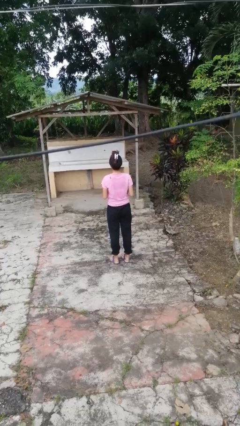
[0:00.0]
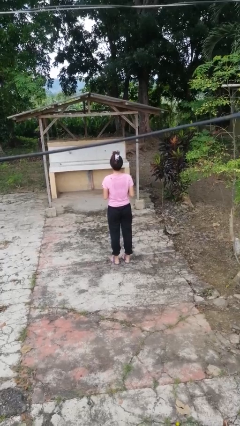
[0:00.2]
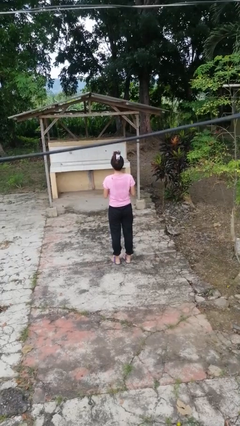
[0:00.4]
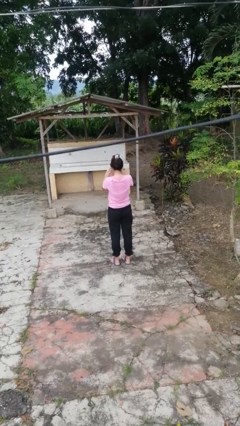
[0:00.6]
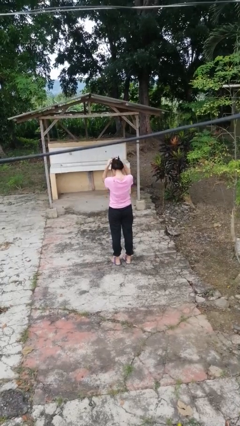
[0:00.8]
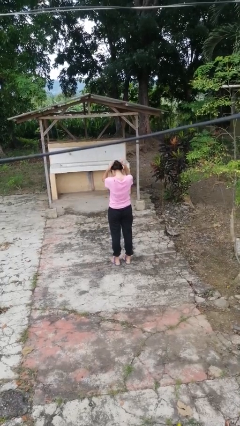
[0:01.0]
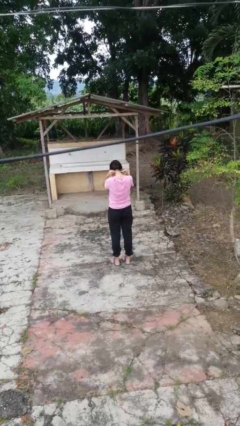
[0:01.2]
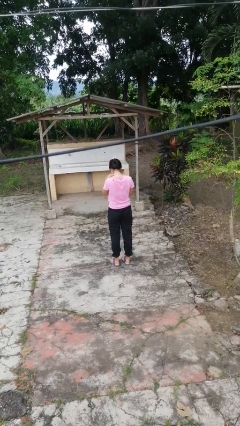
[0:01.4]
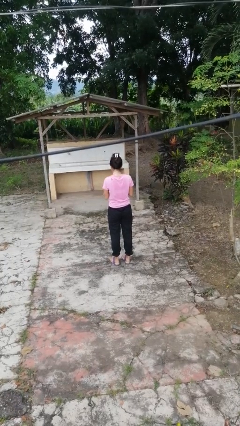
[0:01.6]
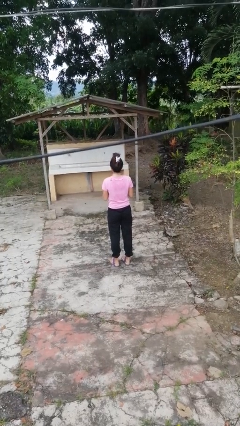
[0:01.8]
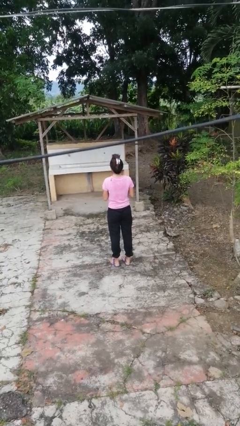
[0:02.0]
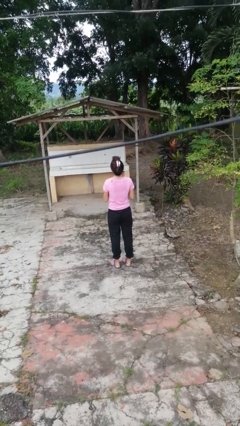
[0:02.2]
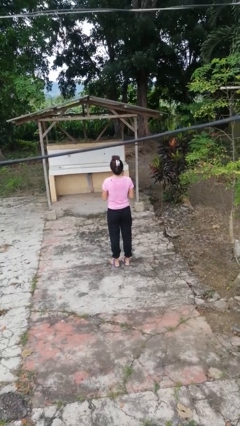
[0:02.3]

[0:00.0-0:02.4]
person puts on necklace

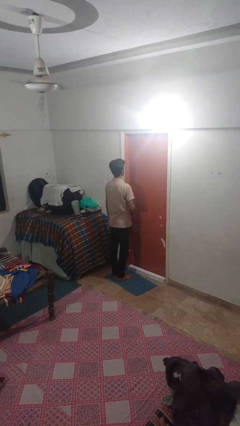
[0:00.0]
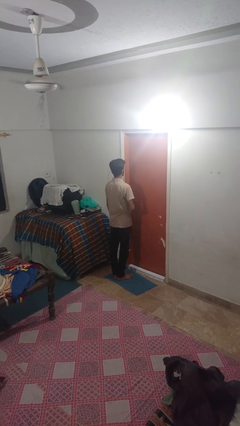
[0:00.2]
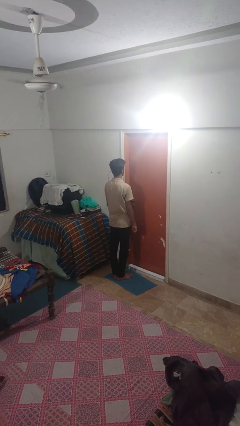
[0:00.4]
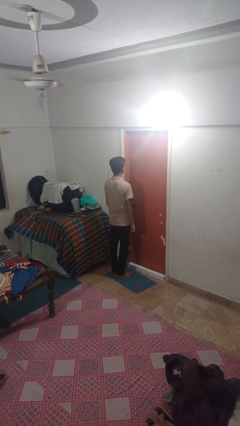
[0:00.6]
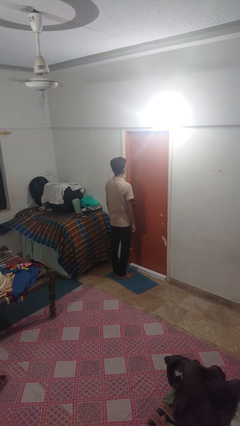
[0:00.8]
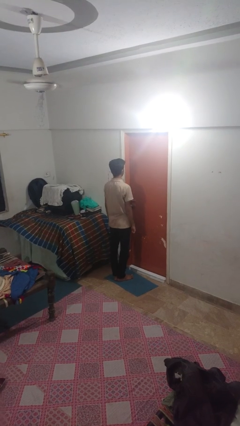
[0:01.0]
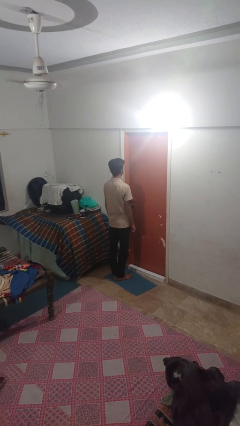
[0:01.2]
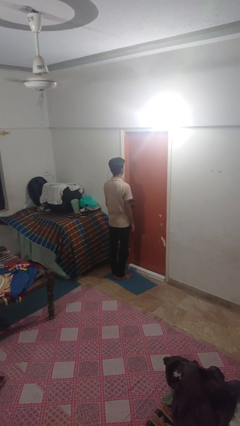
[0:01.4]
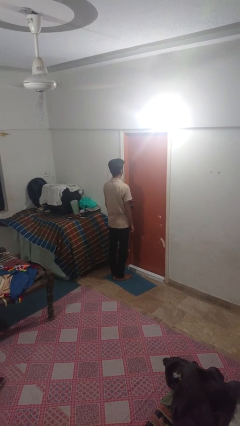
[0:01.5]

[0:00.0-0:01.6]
person locks door with keys

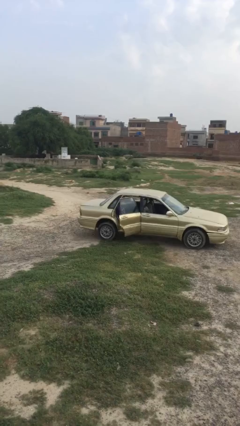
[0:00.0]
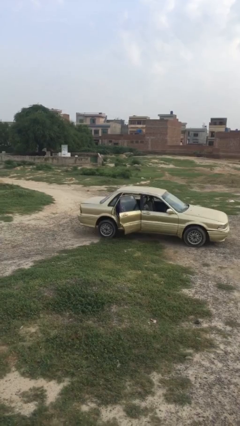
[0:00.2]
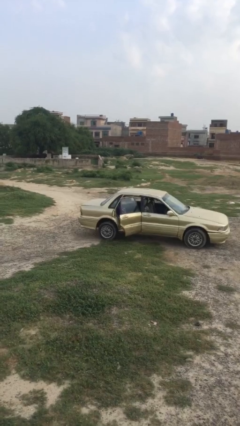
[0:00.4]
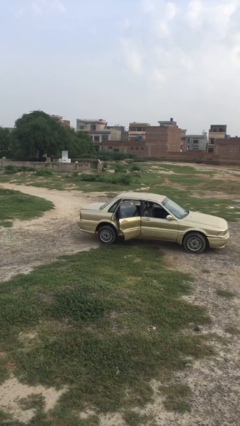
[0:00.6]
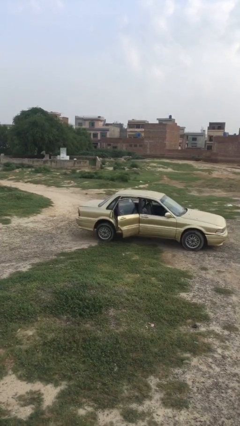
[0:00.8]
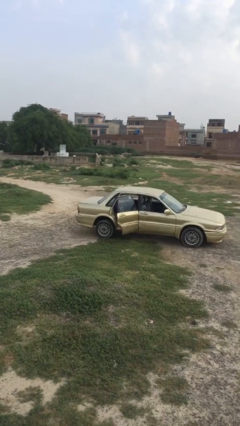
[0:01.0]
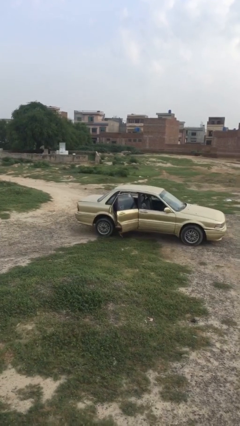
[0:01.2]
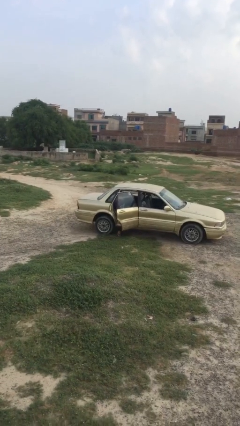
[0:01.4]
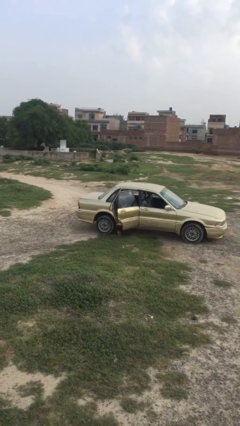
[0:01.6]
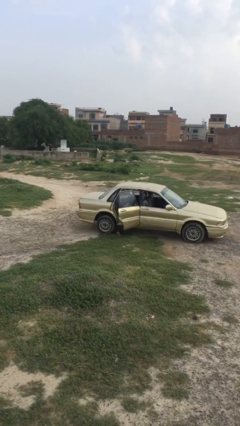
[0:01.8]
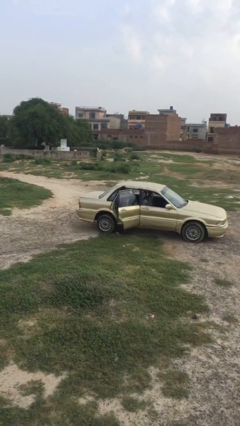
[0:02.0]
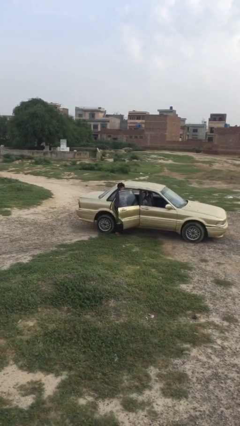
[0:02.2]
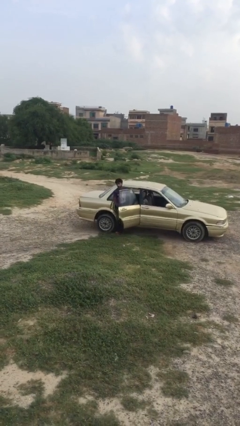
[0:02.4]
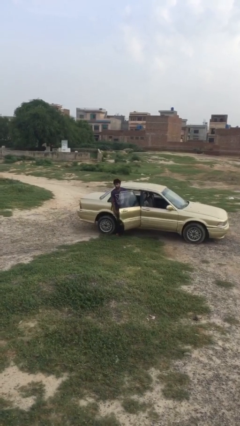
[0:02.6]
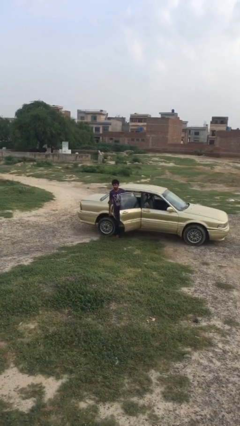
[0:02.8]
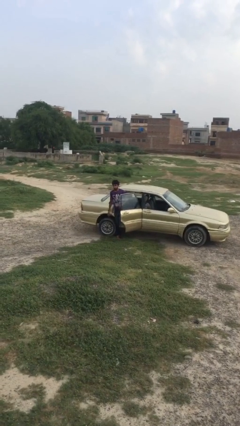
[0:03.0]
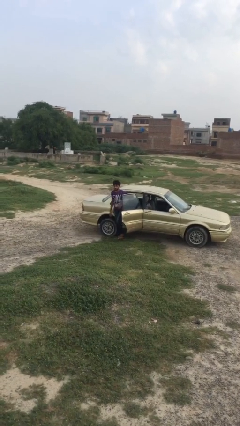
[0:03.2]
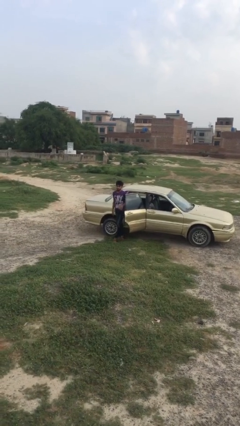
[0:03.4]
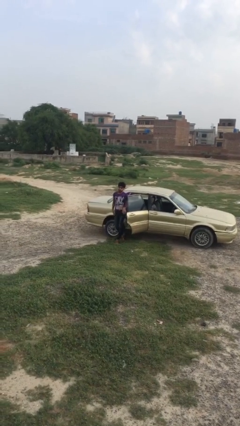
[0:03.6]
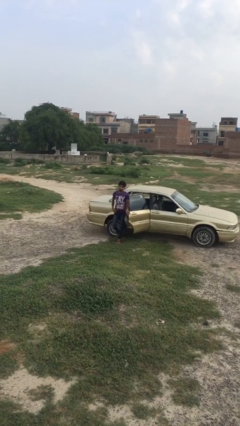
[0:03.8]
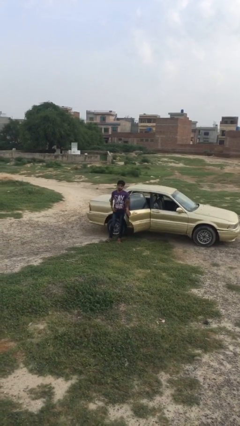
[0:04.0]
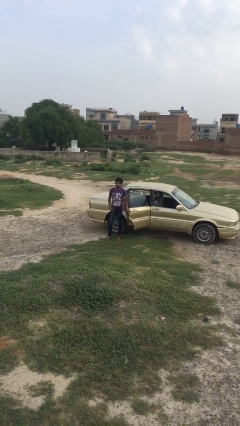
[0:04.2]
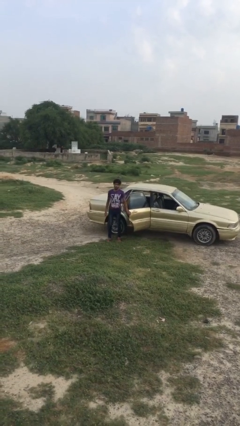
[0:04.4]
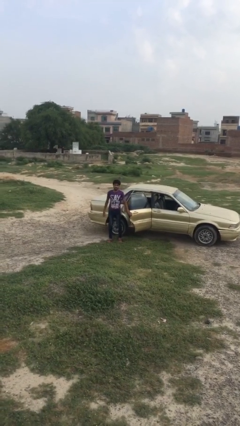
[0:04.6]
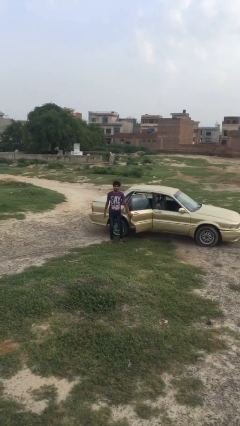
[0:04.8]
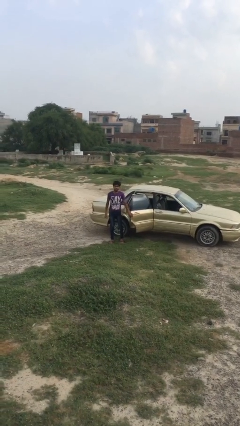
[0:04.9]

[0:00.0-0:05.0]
person exits car

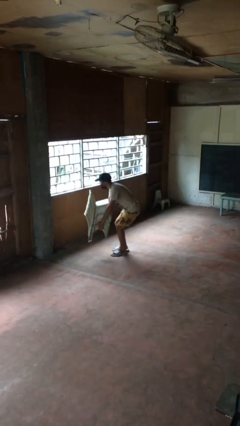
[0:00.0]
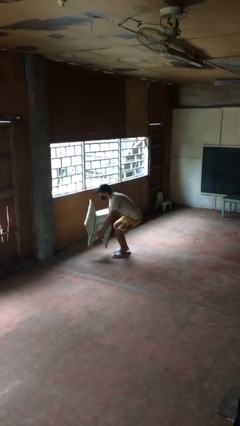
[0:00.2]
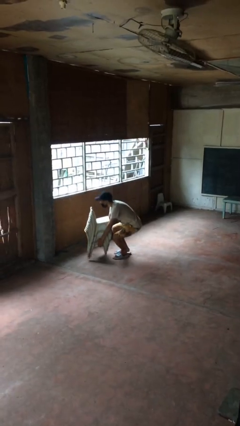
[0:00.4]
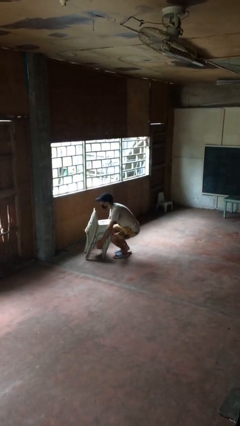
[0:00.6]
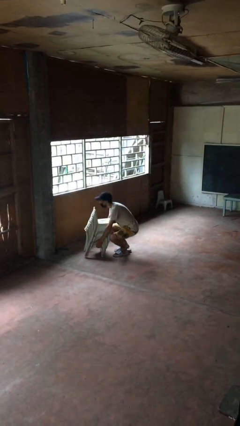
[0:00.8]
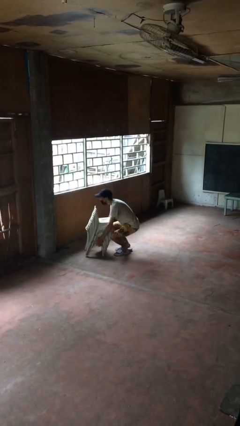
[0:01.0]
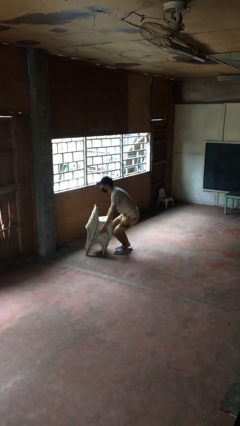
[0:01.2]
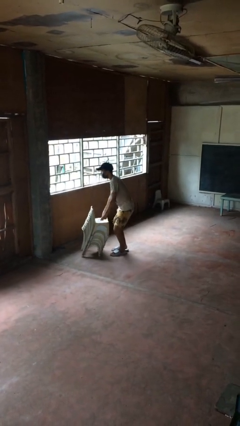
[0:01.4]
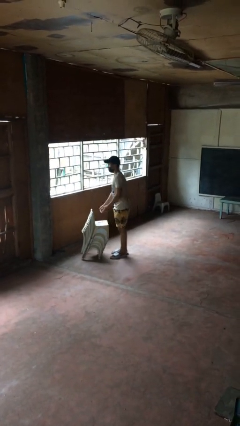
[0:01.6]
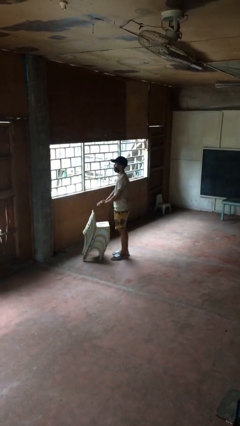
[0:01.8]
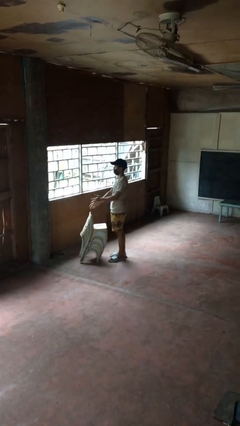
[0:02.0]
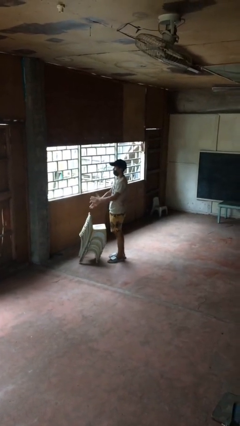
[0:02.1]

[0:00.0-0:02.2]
person puts down object on floor

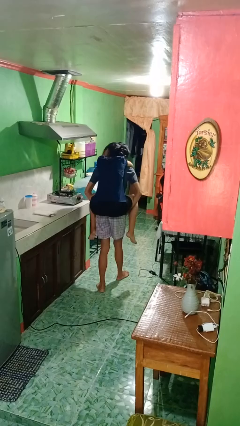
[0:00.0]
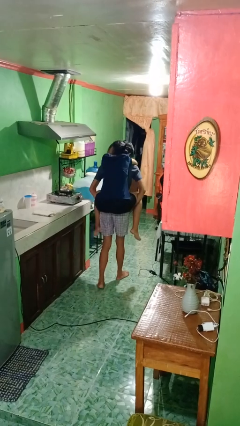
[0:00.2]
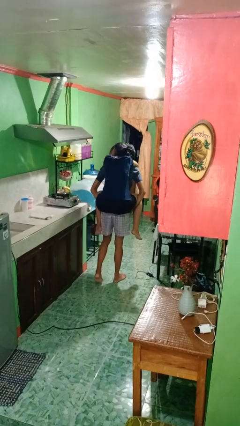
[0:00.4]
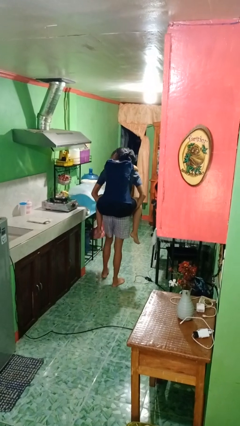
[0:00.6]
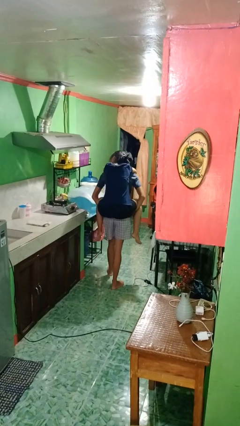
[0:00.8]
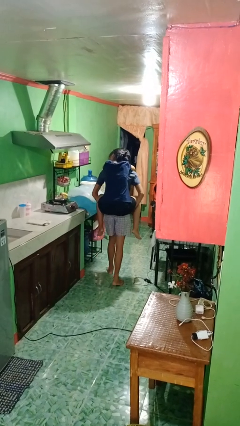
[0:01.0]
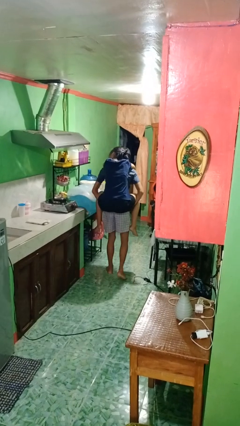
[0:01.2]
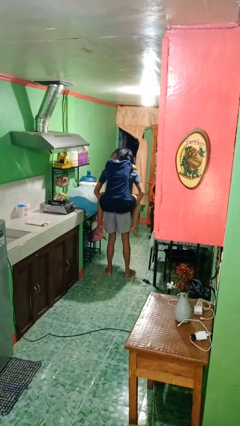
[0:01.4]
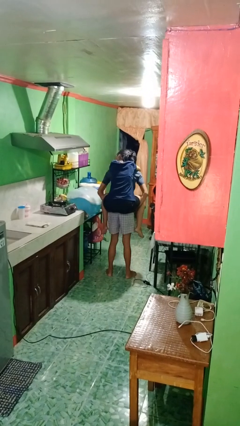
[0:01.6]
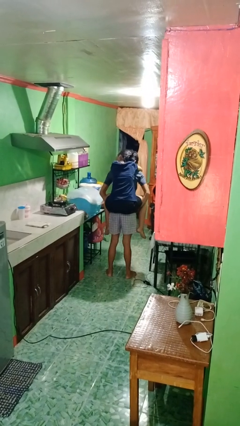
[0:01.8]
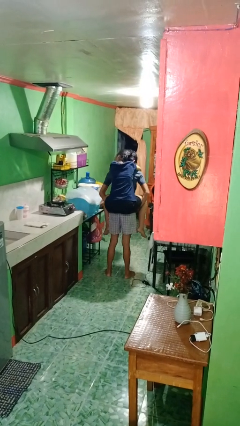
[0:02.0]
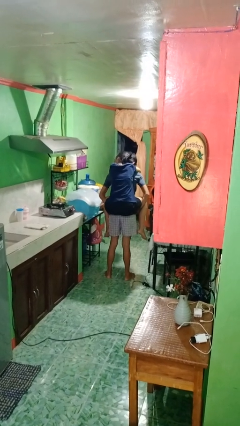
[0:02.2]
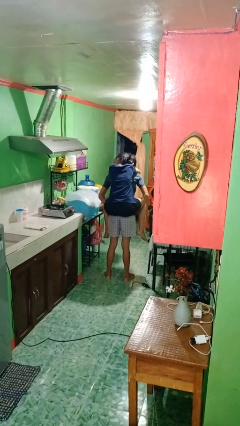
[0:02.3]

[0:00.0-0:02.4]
person carries person on back

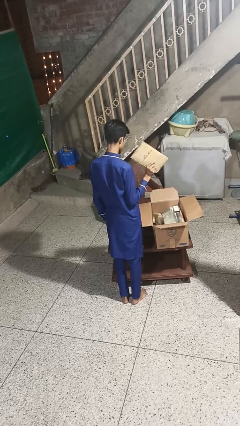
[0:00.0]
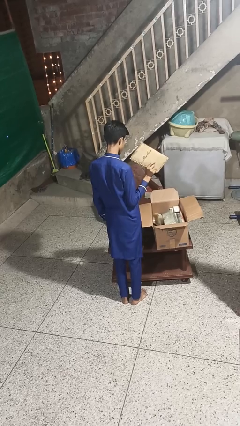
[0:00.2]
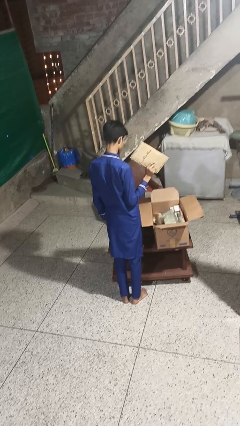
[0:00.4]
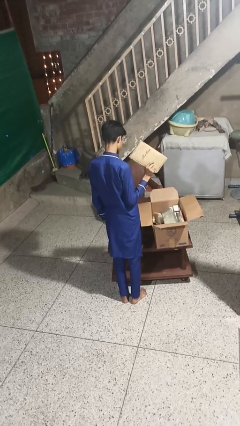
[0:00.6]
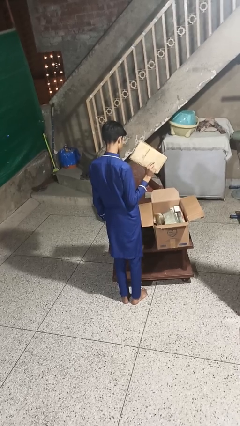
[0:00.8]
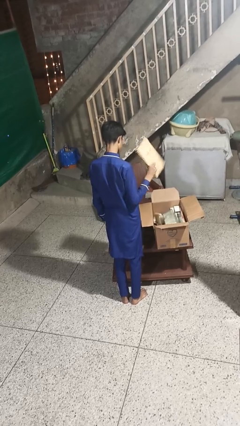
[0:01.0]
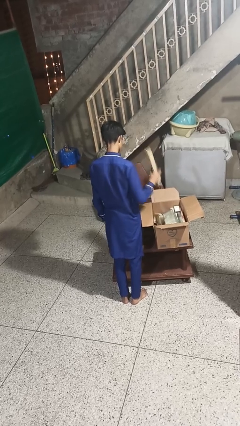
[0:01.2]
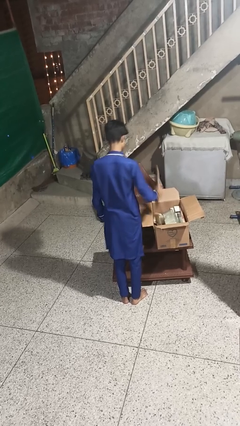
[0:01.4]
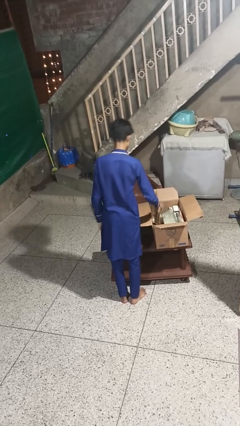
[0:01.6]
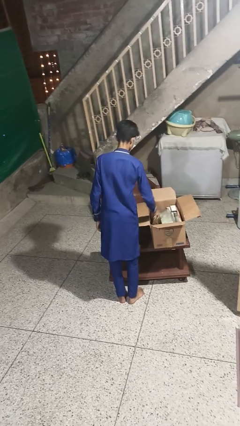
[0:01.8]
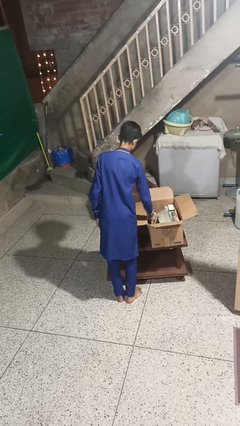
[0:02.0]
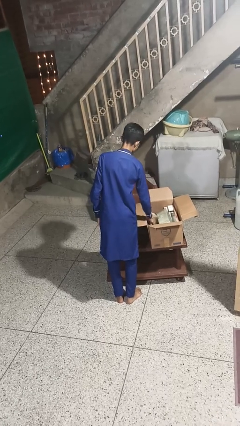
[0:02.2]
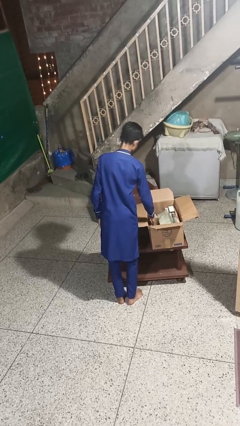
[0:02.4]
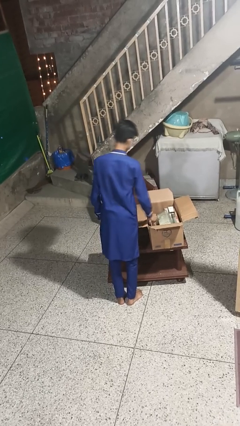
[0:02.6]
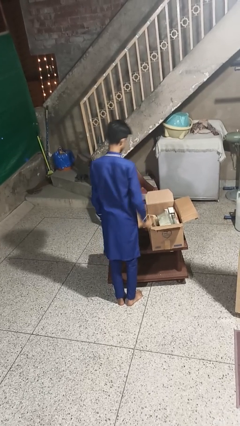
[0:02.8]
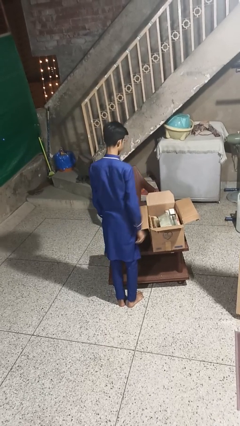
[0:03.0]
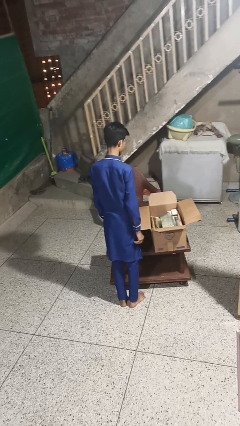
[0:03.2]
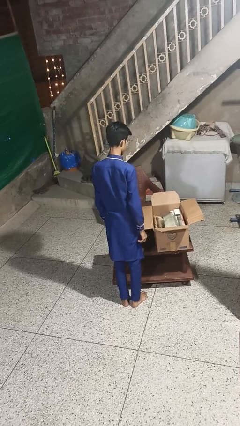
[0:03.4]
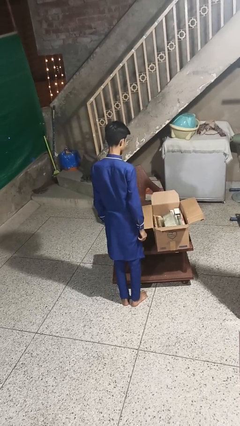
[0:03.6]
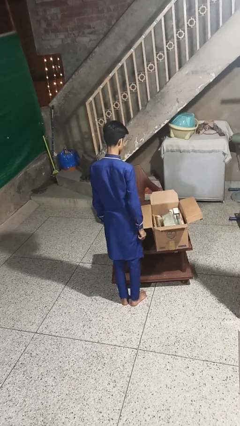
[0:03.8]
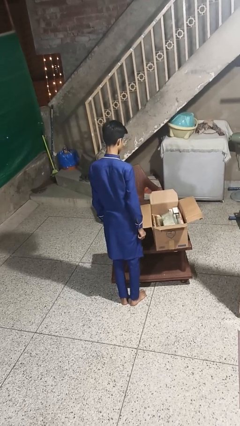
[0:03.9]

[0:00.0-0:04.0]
person puts object into box
